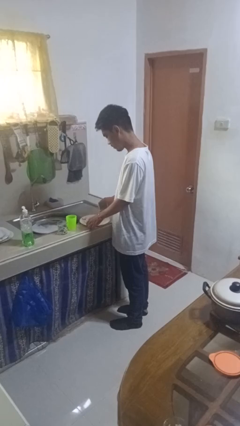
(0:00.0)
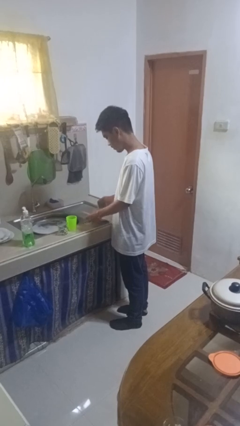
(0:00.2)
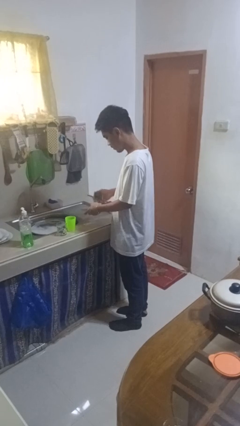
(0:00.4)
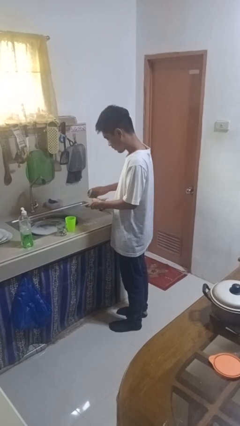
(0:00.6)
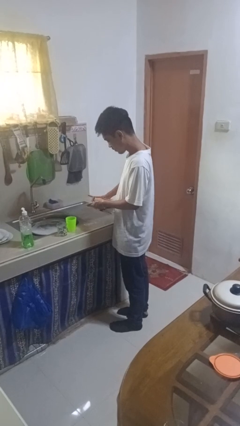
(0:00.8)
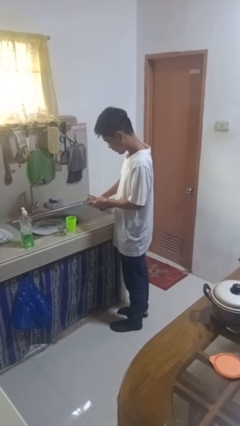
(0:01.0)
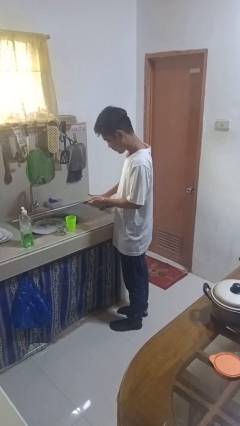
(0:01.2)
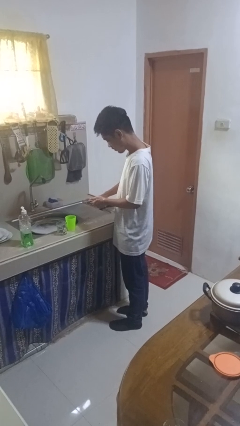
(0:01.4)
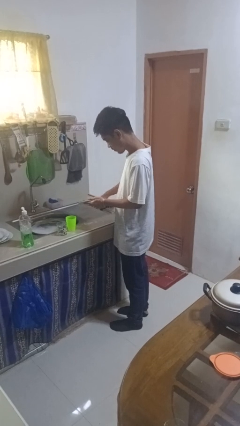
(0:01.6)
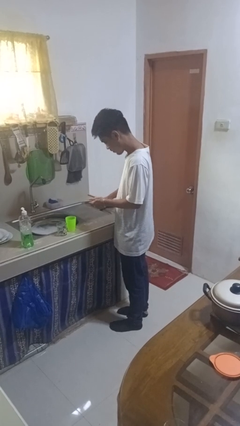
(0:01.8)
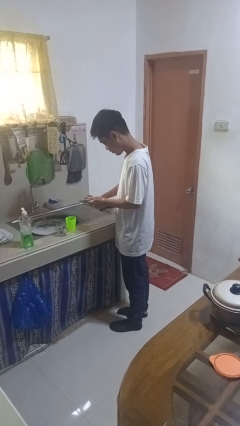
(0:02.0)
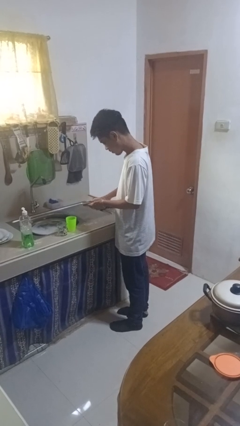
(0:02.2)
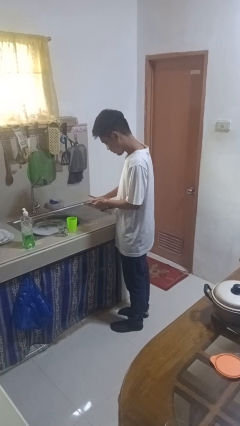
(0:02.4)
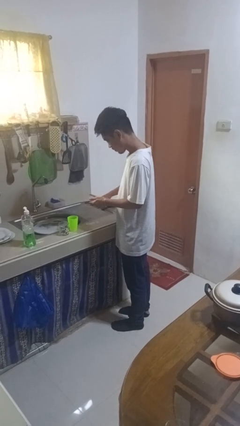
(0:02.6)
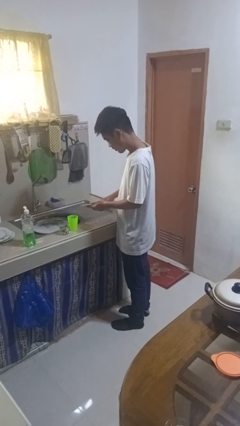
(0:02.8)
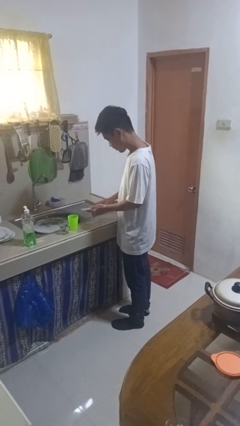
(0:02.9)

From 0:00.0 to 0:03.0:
person washes dish

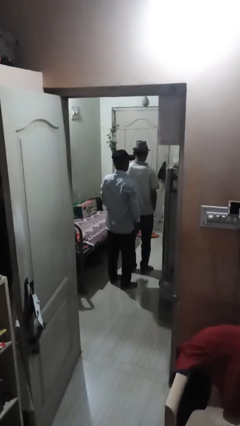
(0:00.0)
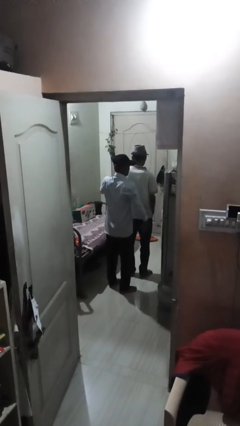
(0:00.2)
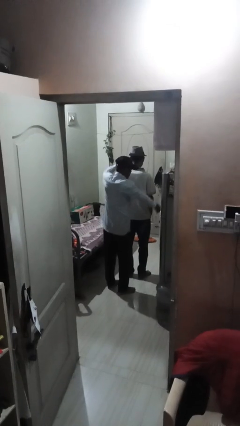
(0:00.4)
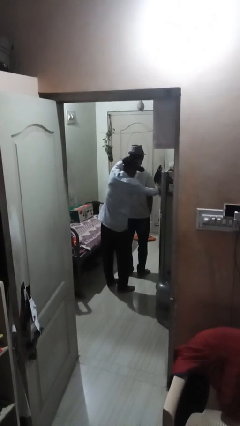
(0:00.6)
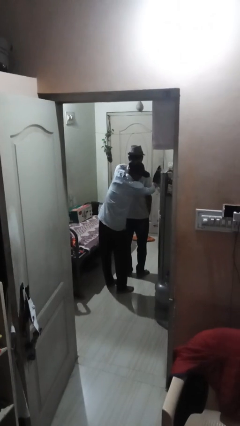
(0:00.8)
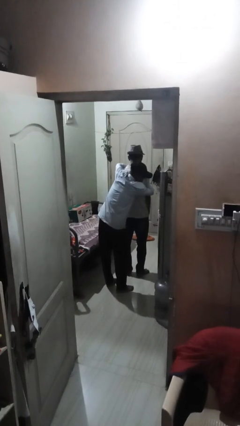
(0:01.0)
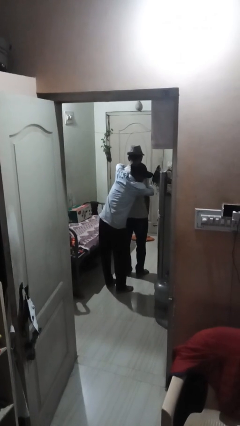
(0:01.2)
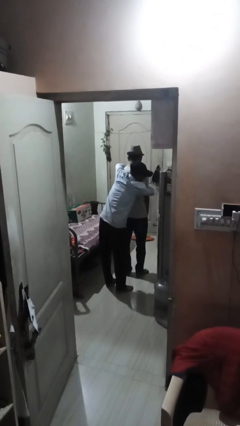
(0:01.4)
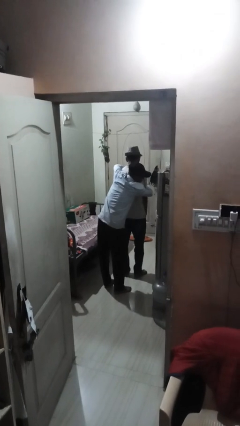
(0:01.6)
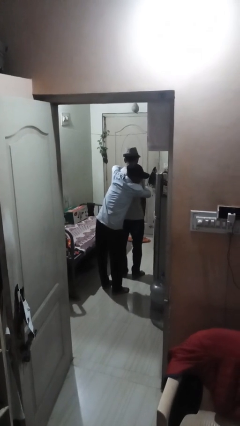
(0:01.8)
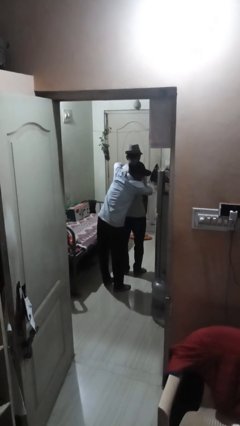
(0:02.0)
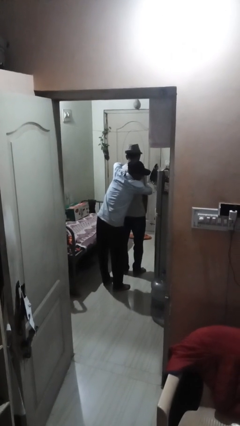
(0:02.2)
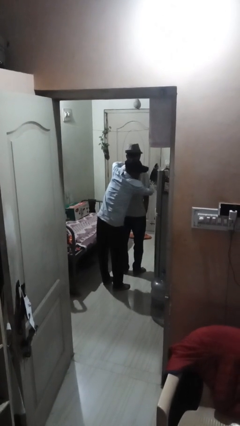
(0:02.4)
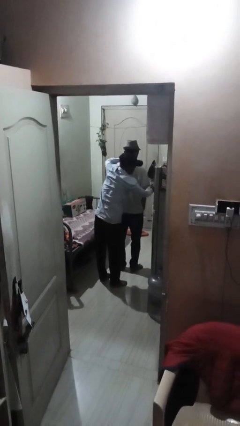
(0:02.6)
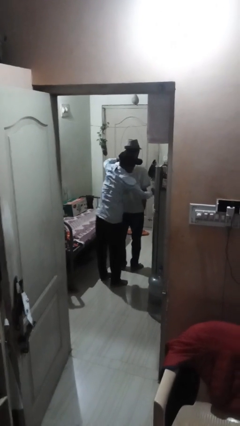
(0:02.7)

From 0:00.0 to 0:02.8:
person hugs person from behind

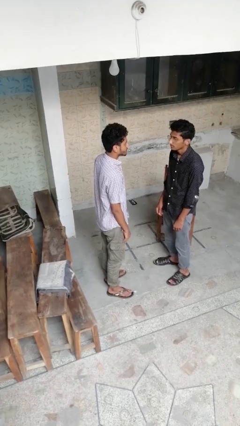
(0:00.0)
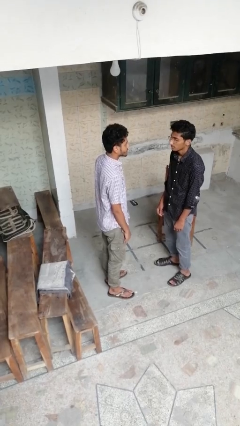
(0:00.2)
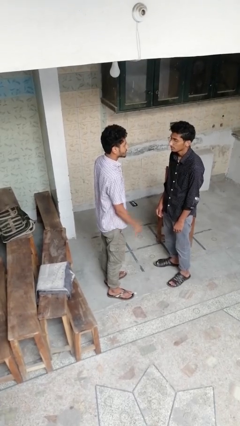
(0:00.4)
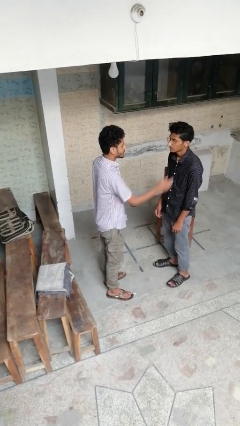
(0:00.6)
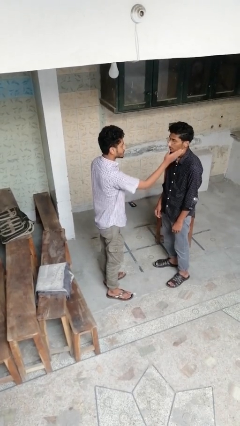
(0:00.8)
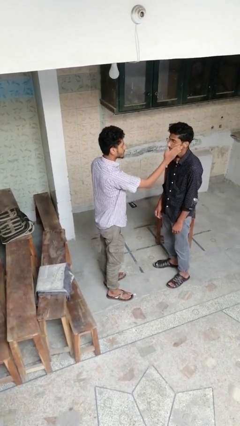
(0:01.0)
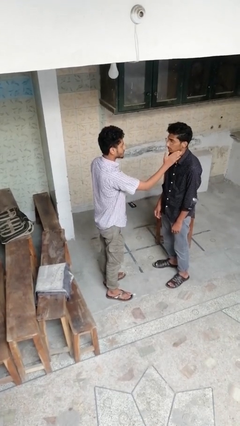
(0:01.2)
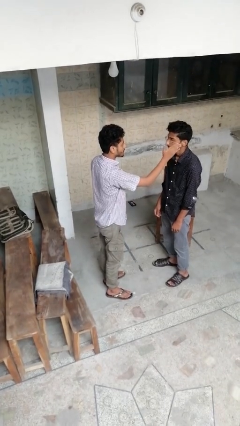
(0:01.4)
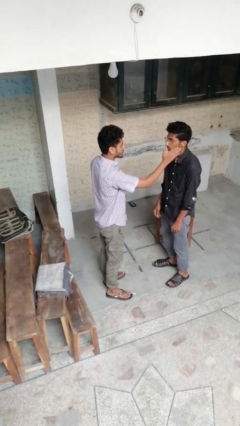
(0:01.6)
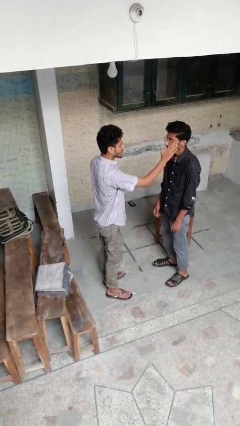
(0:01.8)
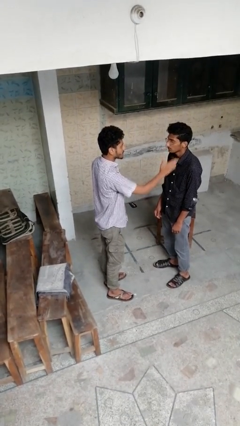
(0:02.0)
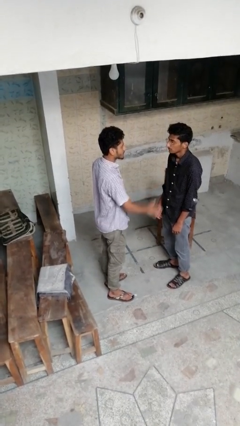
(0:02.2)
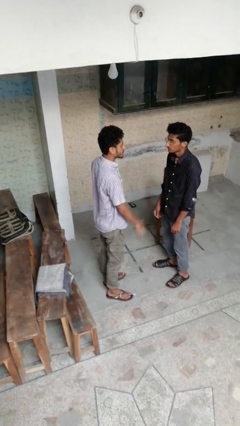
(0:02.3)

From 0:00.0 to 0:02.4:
person touches face of person

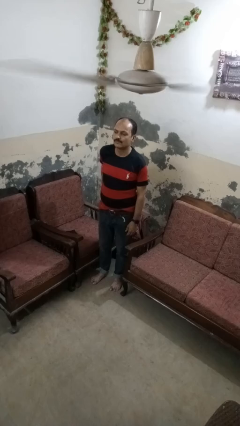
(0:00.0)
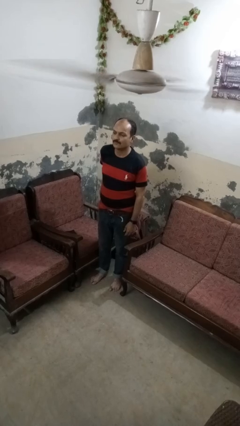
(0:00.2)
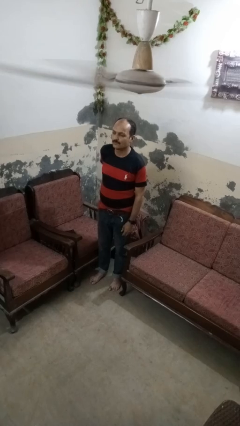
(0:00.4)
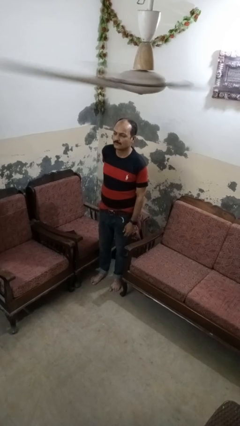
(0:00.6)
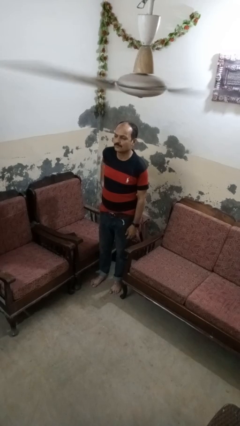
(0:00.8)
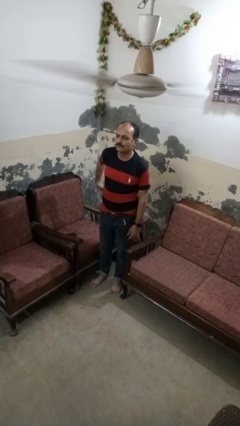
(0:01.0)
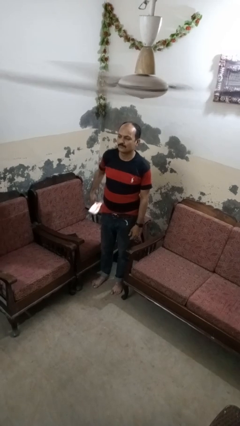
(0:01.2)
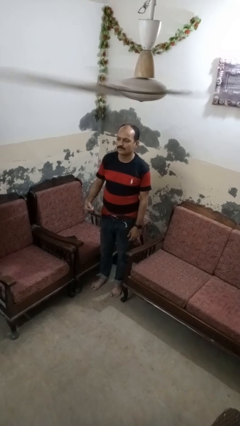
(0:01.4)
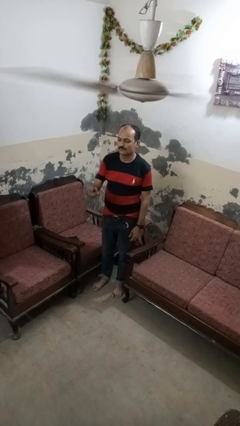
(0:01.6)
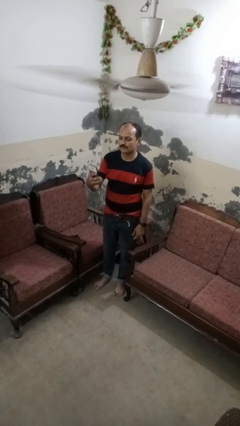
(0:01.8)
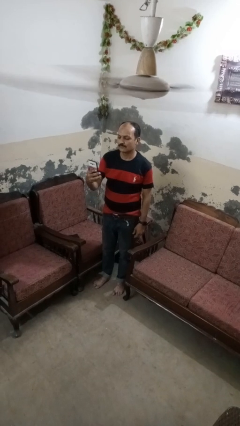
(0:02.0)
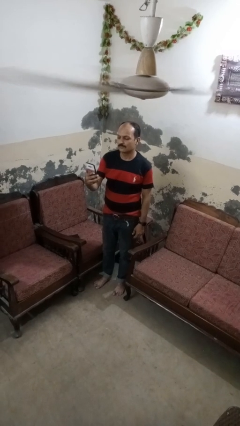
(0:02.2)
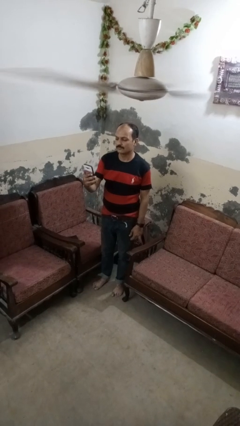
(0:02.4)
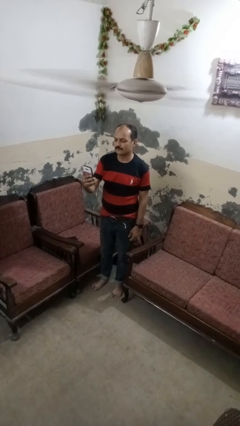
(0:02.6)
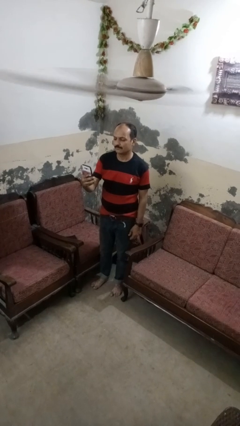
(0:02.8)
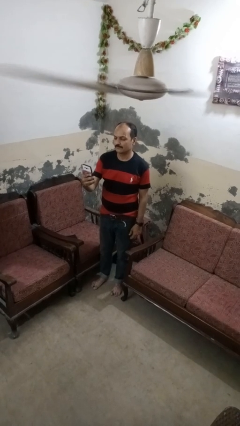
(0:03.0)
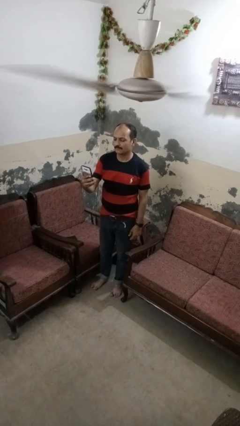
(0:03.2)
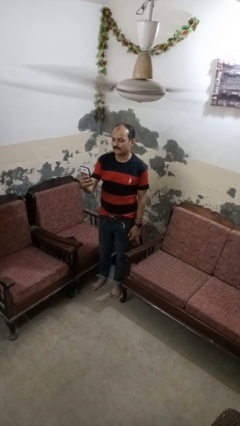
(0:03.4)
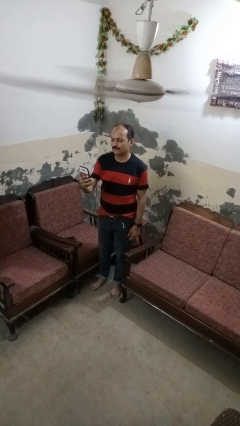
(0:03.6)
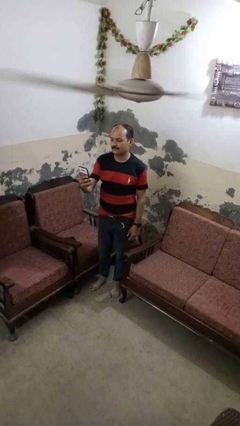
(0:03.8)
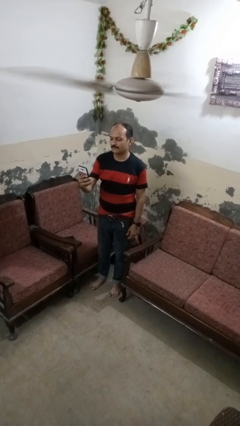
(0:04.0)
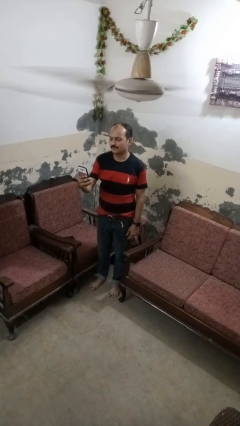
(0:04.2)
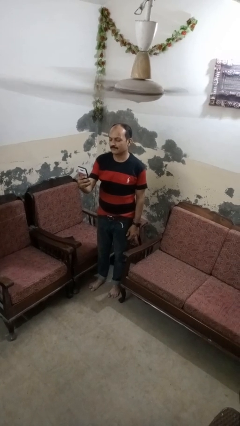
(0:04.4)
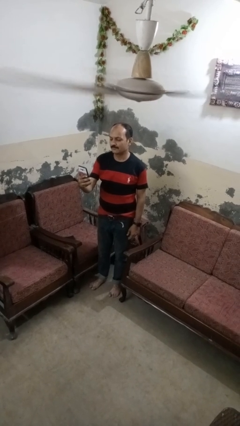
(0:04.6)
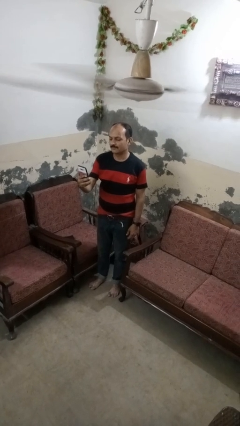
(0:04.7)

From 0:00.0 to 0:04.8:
person takes phone from pocket

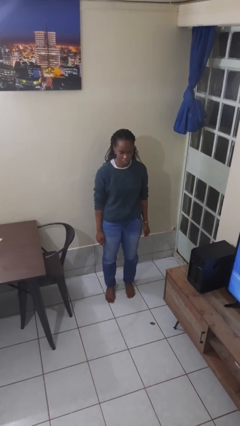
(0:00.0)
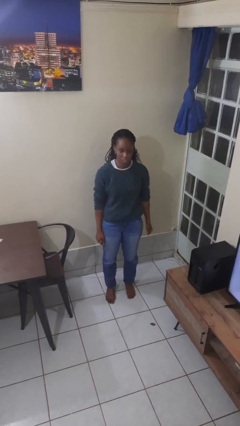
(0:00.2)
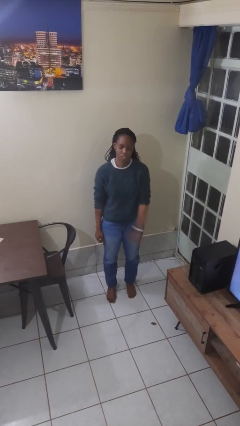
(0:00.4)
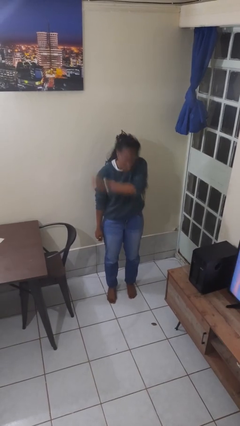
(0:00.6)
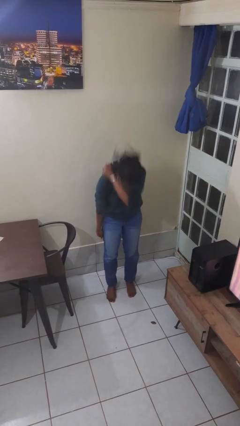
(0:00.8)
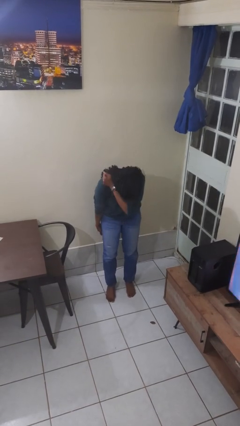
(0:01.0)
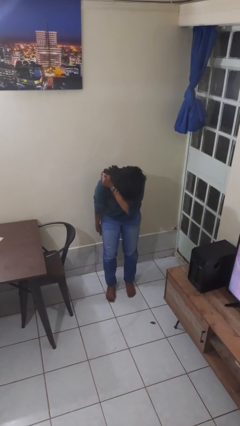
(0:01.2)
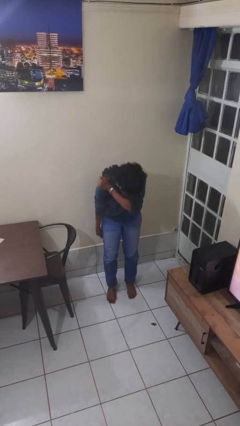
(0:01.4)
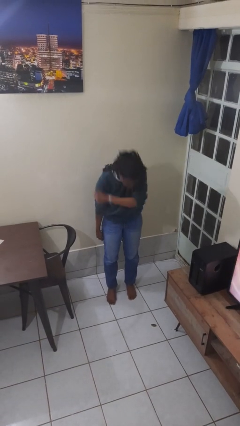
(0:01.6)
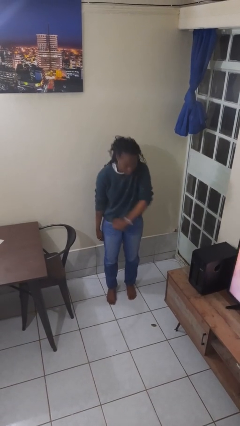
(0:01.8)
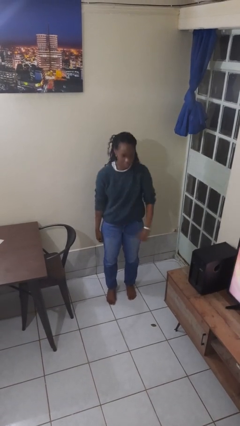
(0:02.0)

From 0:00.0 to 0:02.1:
person sneezes into arm

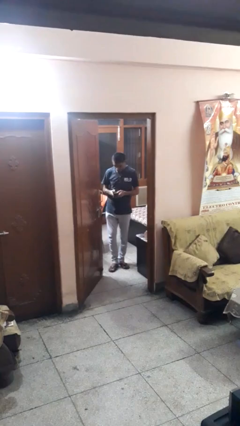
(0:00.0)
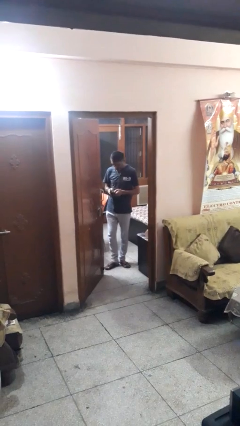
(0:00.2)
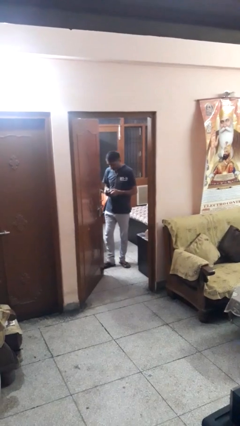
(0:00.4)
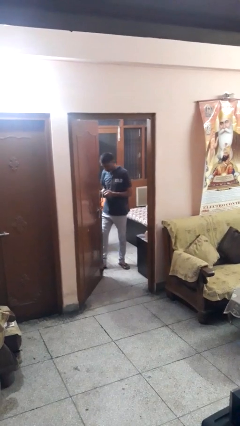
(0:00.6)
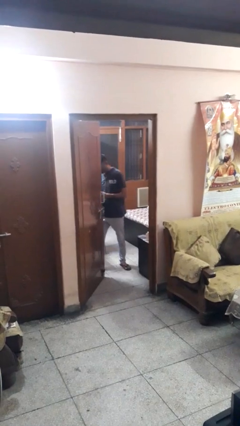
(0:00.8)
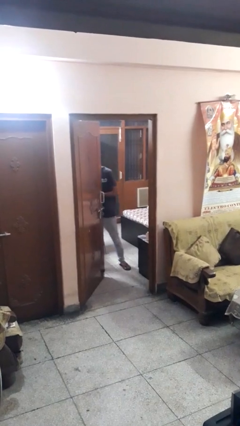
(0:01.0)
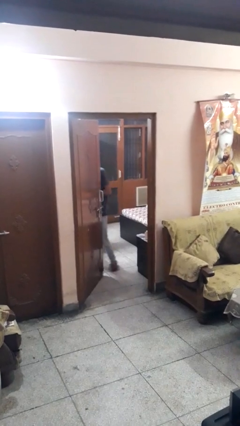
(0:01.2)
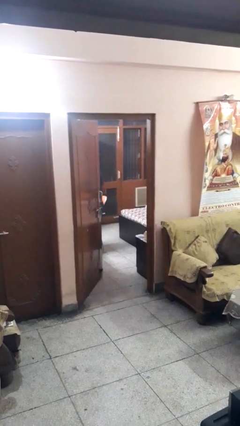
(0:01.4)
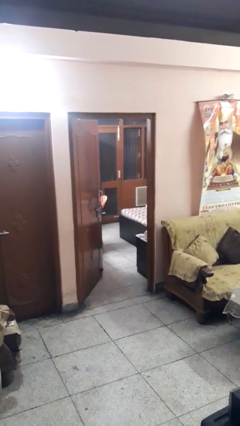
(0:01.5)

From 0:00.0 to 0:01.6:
person exits scene through structure

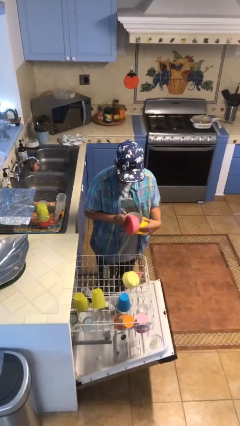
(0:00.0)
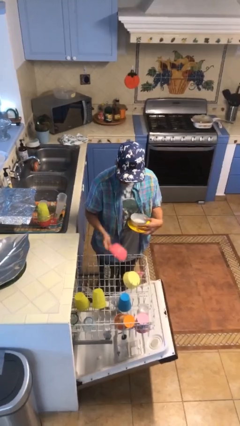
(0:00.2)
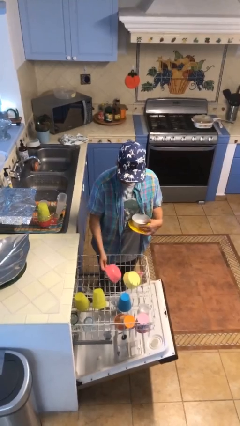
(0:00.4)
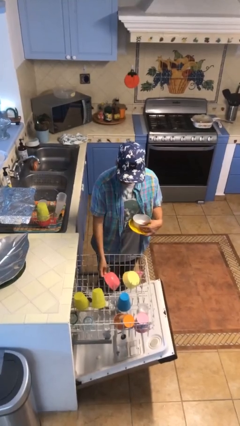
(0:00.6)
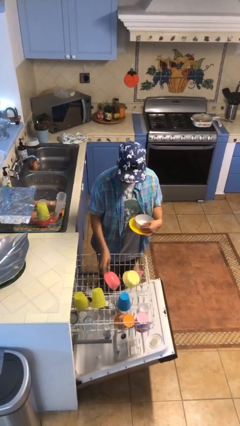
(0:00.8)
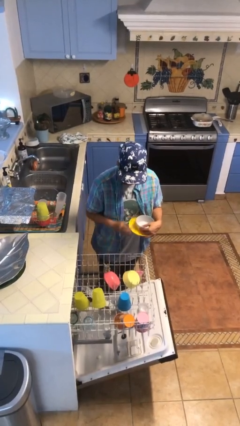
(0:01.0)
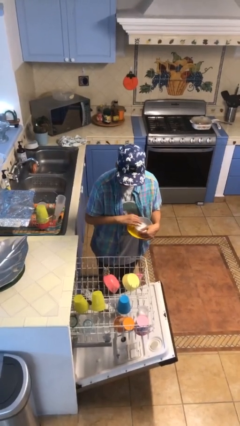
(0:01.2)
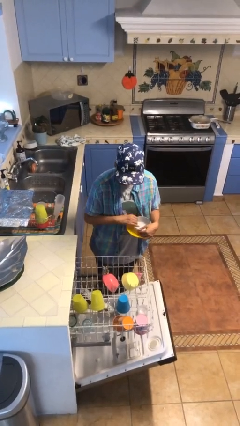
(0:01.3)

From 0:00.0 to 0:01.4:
person loads dishwasher
